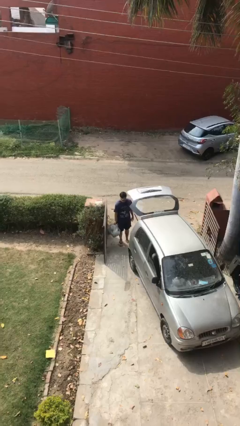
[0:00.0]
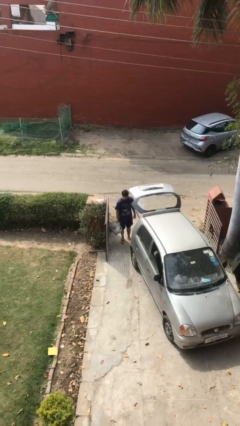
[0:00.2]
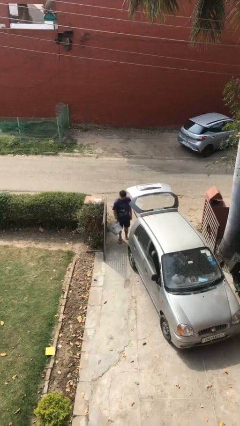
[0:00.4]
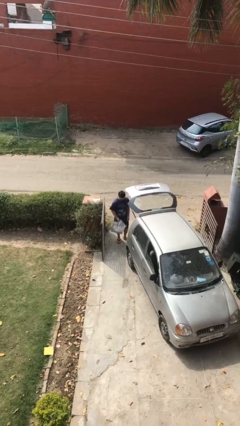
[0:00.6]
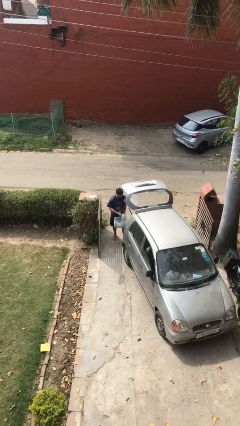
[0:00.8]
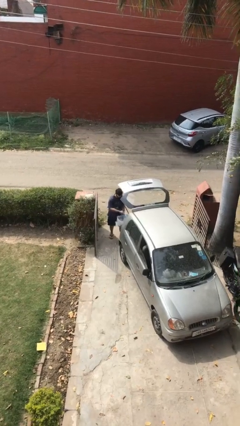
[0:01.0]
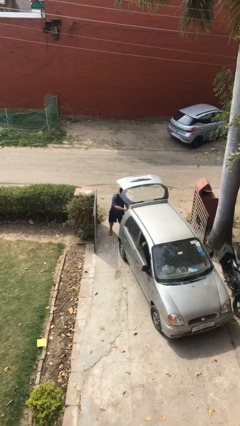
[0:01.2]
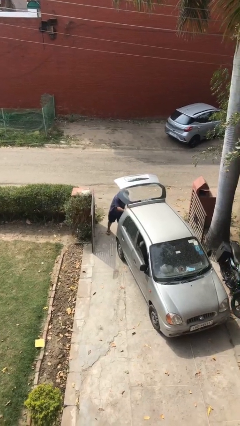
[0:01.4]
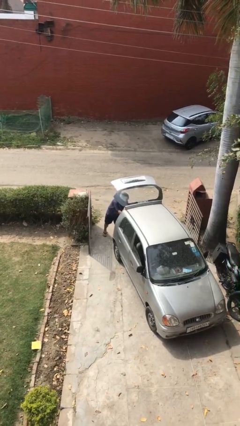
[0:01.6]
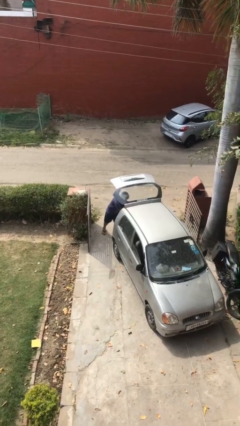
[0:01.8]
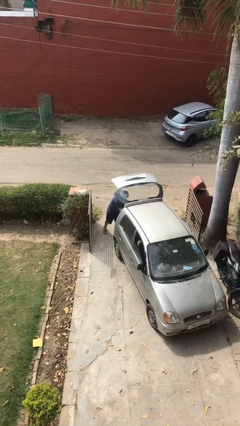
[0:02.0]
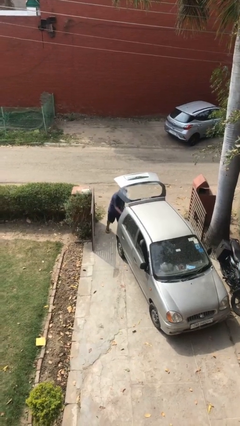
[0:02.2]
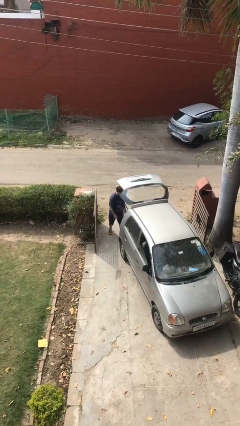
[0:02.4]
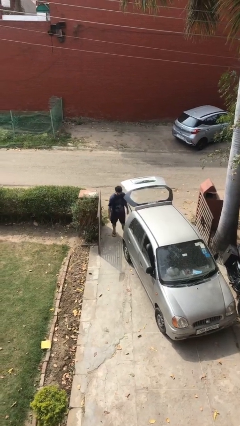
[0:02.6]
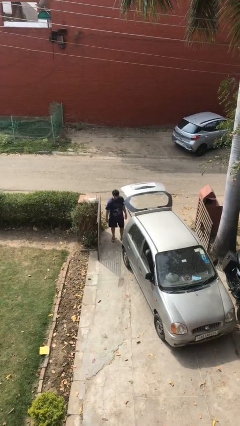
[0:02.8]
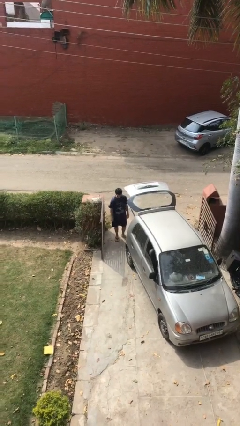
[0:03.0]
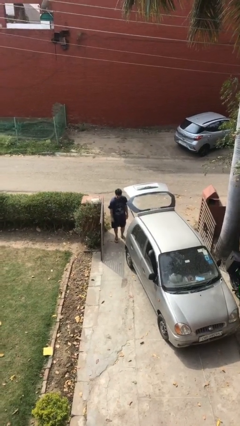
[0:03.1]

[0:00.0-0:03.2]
person loads car

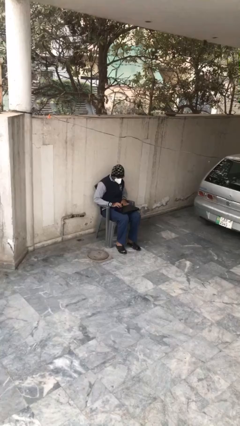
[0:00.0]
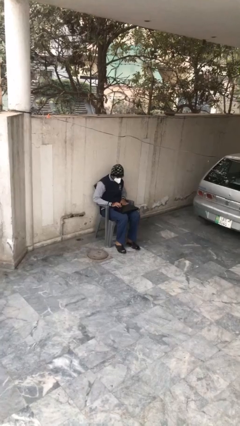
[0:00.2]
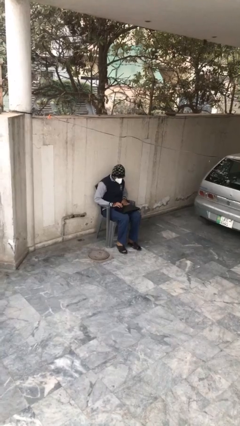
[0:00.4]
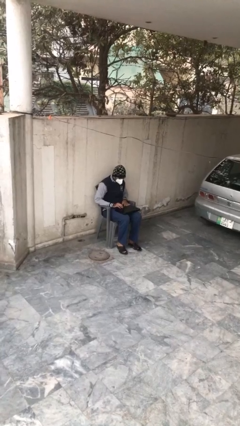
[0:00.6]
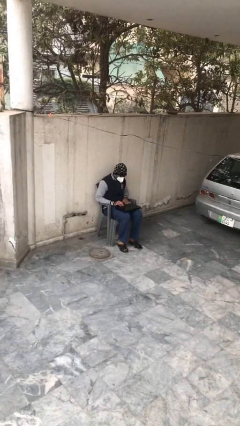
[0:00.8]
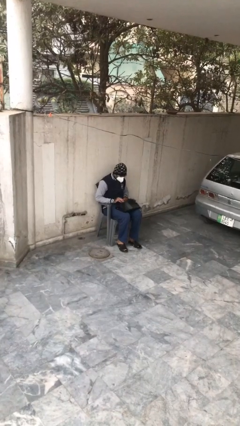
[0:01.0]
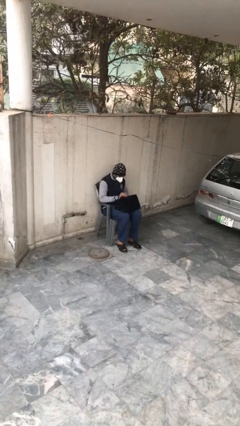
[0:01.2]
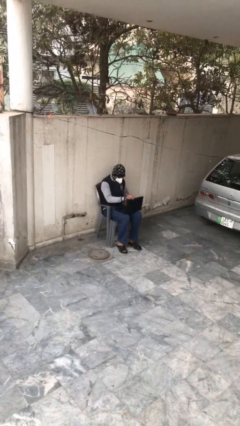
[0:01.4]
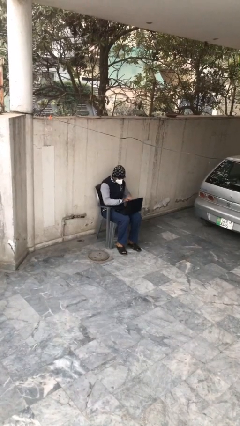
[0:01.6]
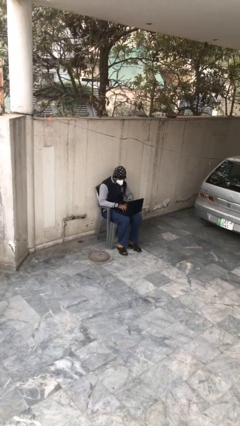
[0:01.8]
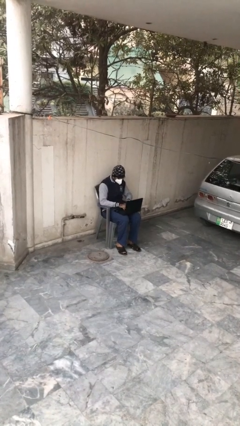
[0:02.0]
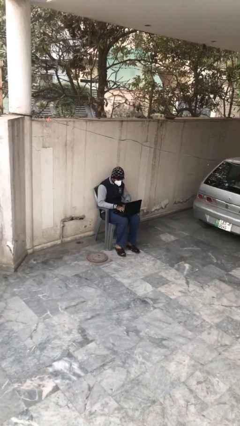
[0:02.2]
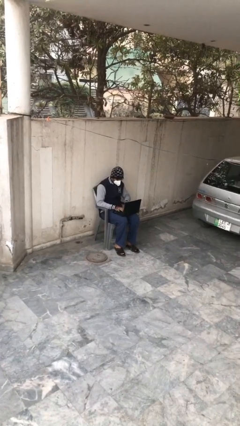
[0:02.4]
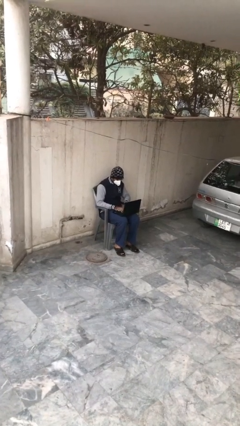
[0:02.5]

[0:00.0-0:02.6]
person interacts with laptop

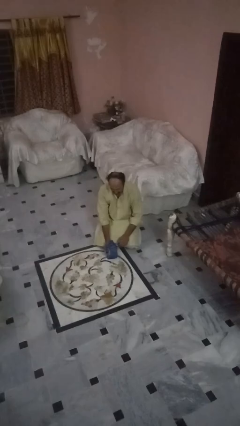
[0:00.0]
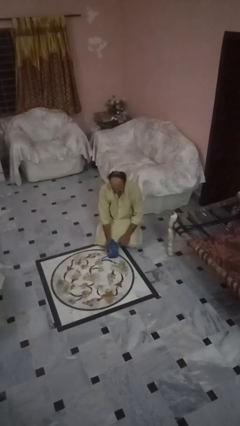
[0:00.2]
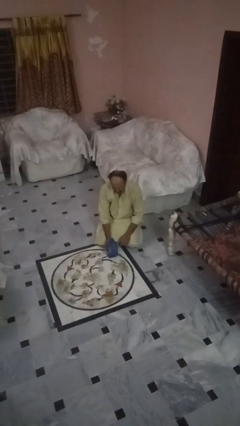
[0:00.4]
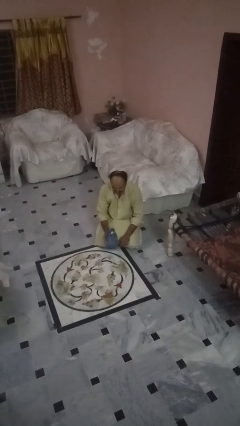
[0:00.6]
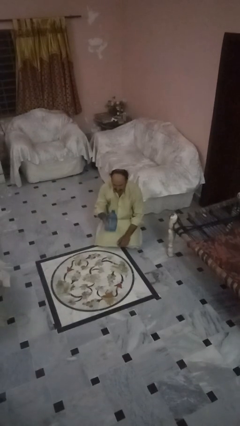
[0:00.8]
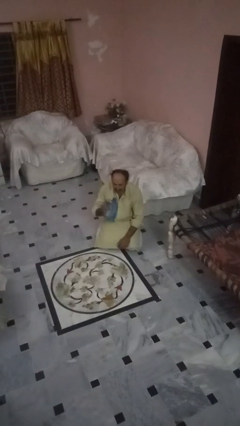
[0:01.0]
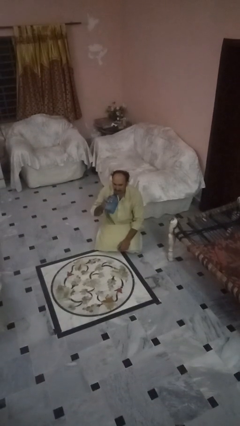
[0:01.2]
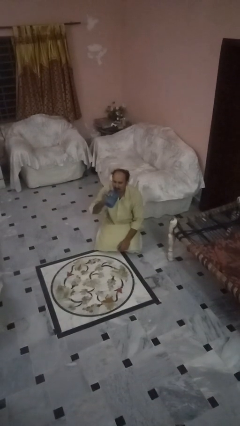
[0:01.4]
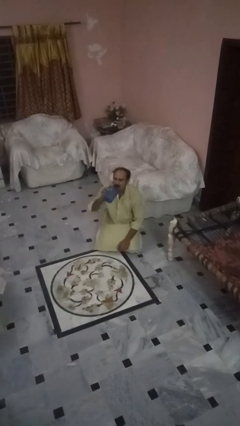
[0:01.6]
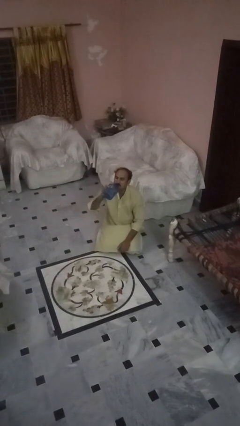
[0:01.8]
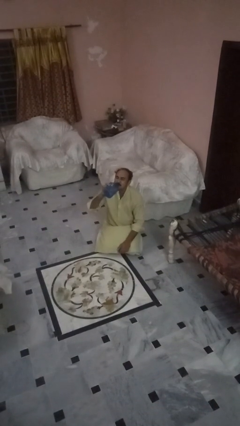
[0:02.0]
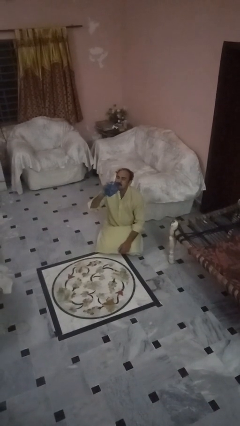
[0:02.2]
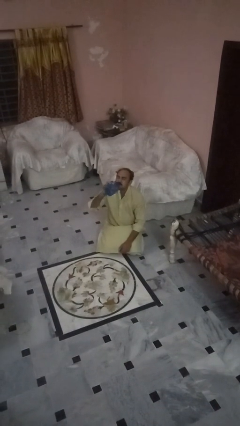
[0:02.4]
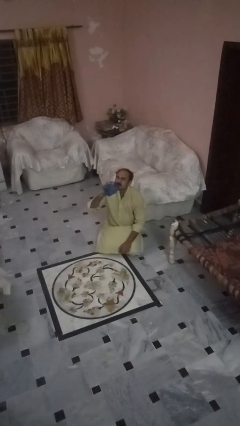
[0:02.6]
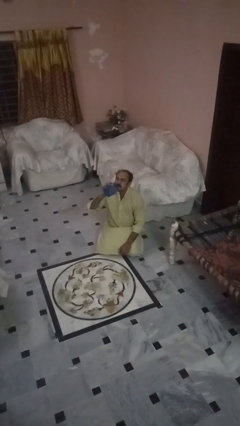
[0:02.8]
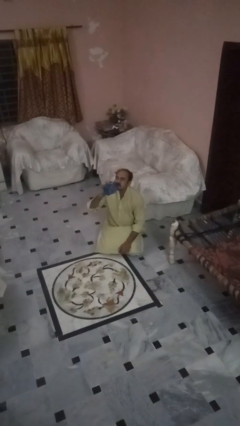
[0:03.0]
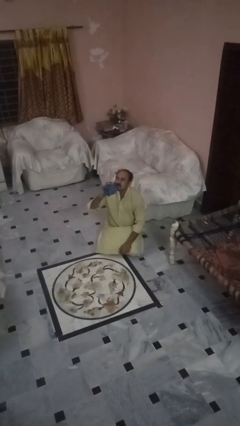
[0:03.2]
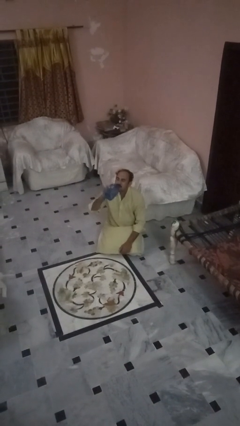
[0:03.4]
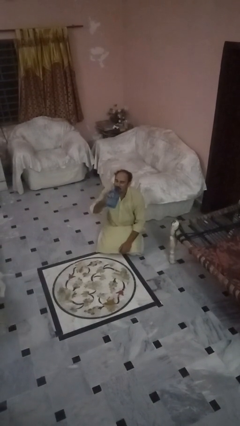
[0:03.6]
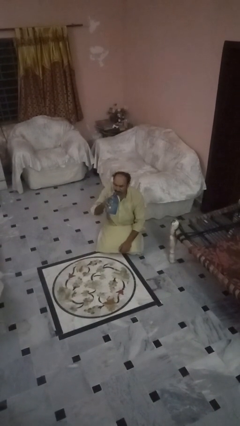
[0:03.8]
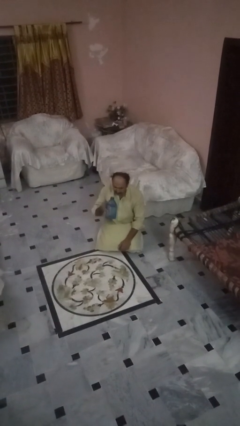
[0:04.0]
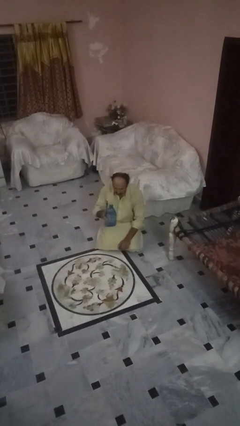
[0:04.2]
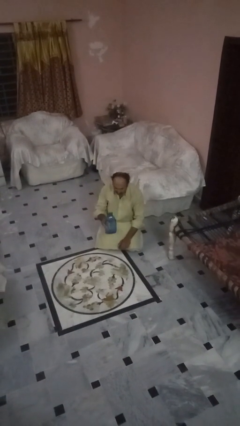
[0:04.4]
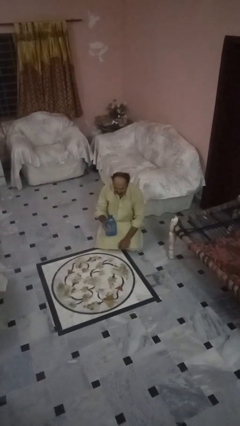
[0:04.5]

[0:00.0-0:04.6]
person drinks from bottle

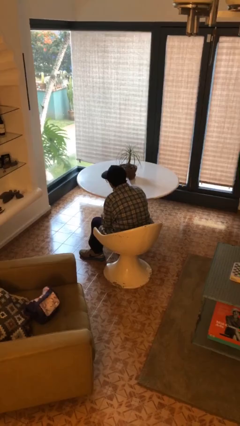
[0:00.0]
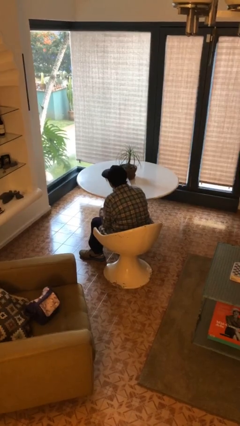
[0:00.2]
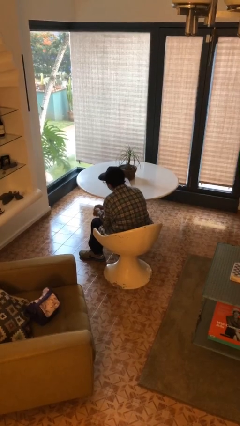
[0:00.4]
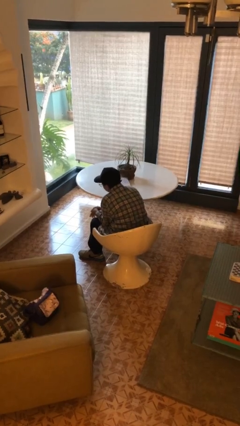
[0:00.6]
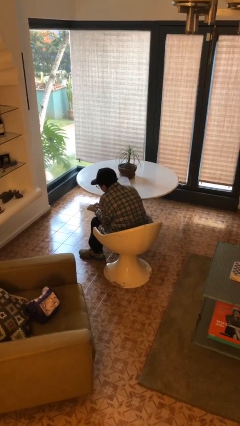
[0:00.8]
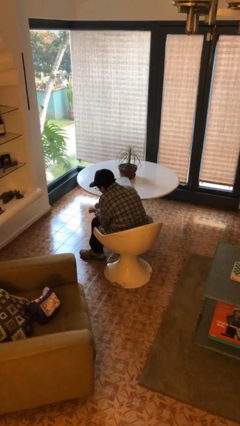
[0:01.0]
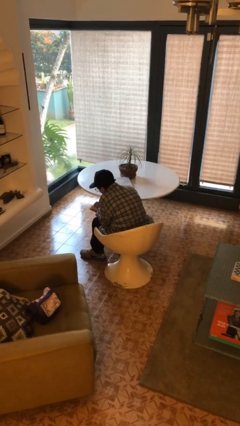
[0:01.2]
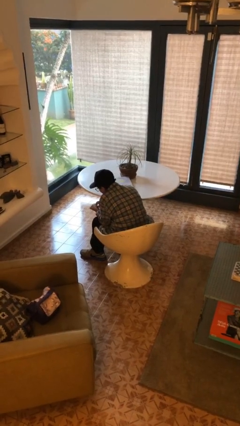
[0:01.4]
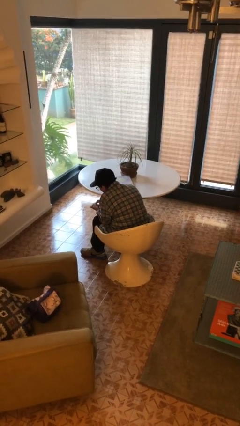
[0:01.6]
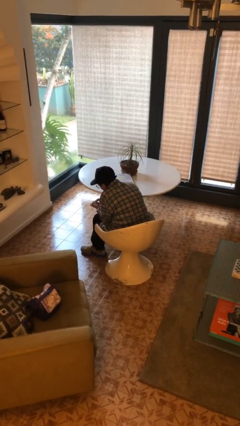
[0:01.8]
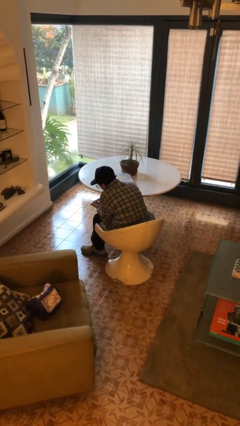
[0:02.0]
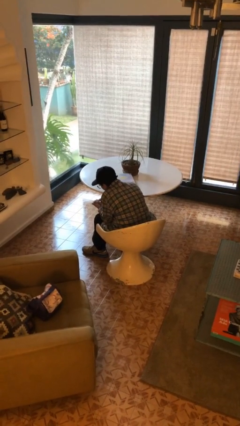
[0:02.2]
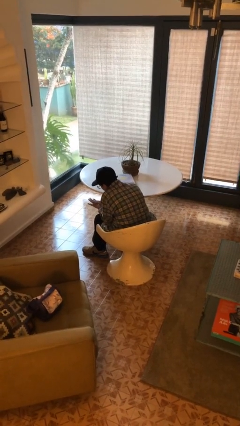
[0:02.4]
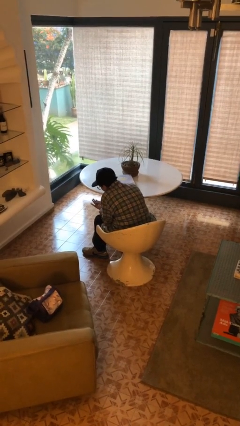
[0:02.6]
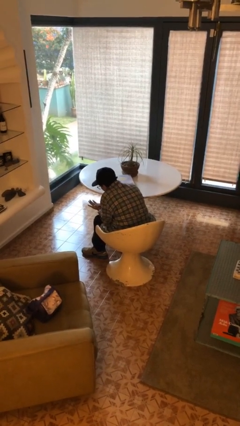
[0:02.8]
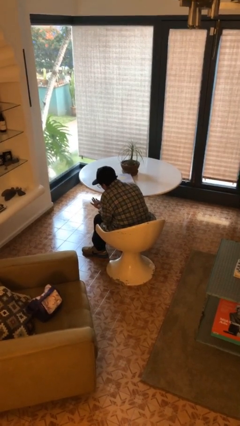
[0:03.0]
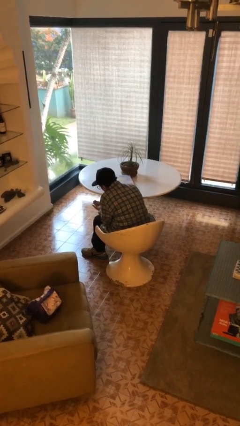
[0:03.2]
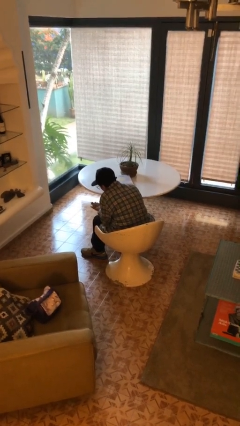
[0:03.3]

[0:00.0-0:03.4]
person looks at hands in lap

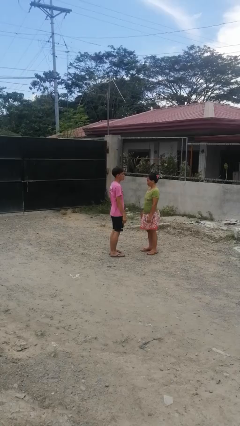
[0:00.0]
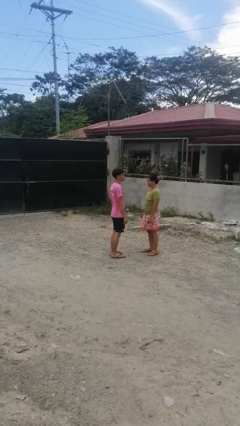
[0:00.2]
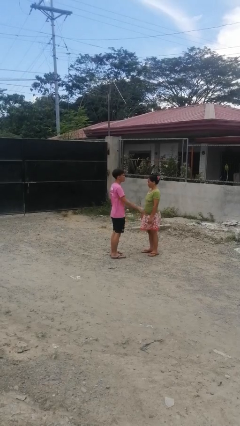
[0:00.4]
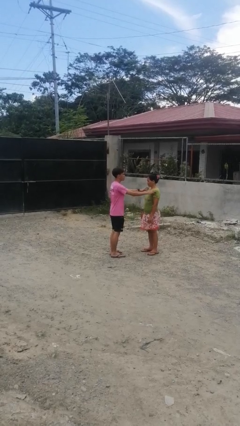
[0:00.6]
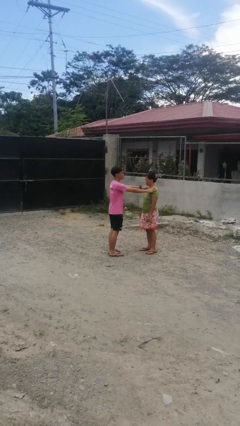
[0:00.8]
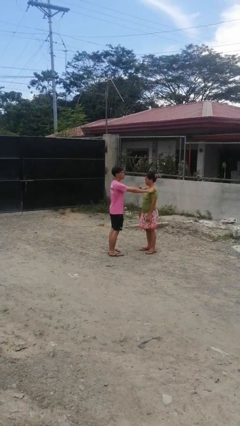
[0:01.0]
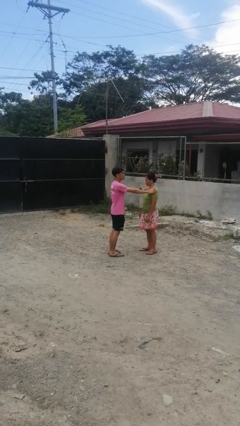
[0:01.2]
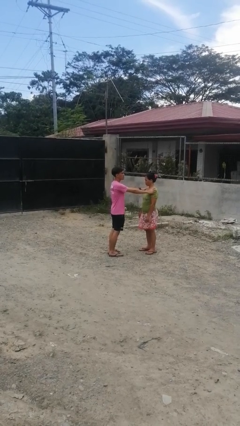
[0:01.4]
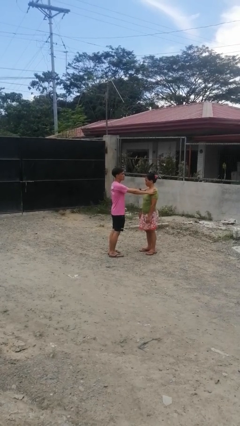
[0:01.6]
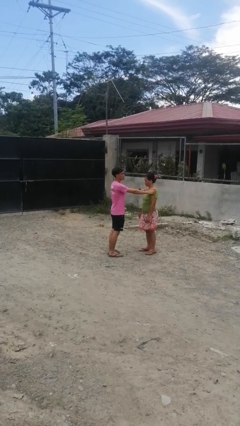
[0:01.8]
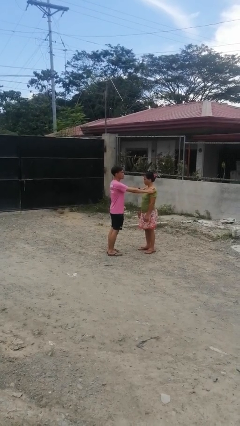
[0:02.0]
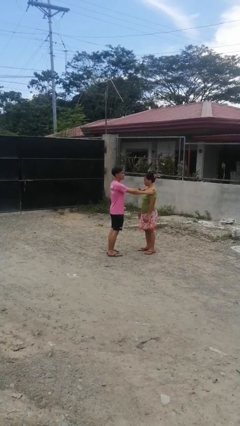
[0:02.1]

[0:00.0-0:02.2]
person grabs person by shoulder

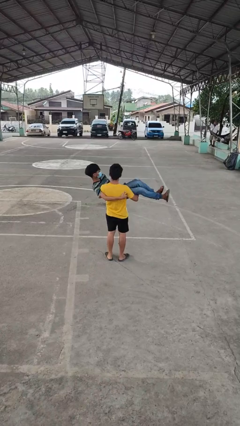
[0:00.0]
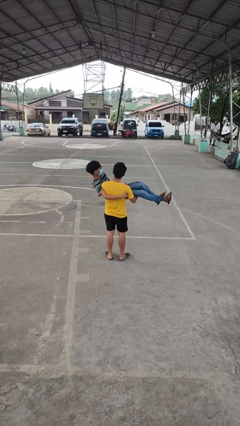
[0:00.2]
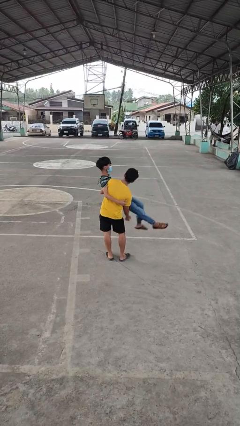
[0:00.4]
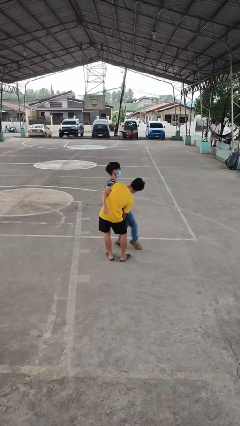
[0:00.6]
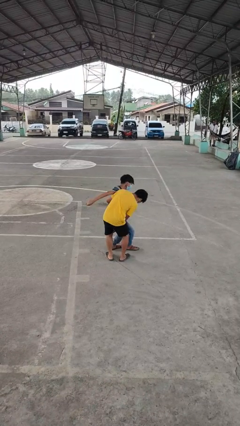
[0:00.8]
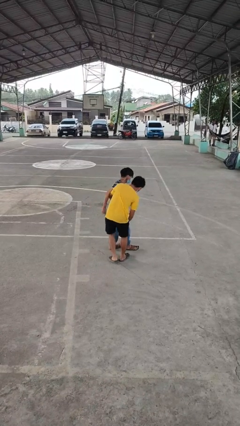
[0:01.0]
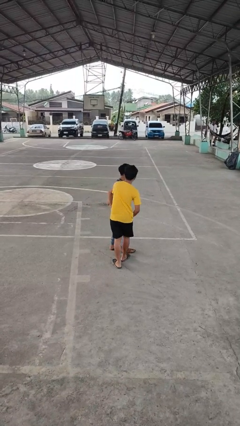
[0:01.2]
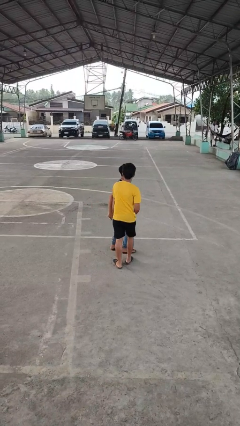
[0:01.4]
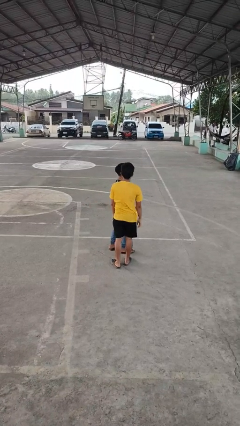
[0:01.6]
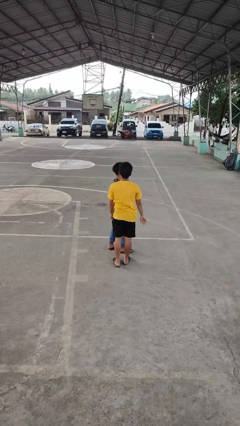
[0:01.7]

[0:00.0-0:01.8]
person puts down person
